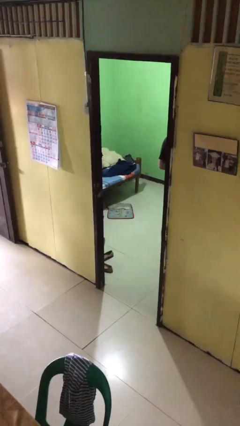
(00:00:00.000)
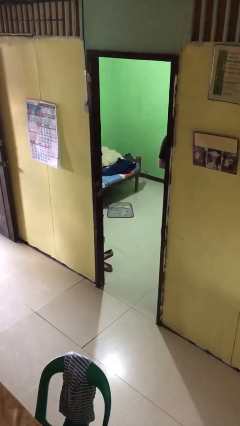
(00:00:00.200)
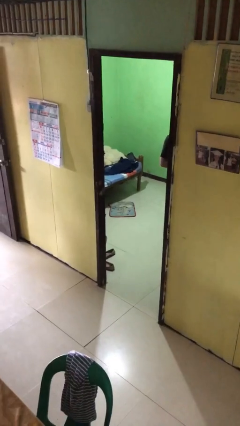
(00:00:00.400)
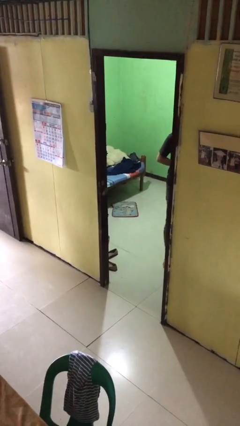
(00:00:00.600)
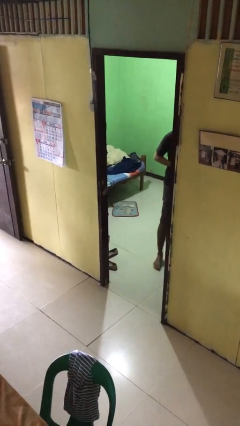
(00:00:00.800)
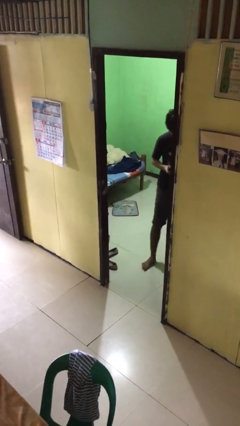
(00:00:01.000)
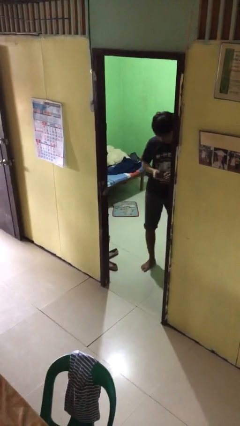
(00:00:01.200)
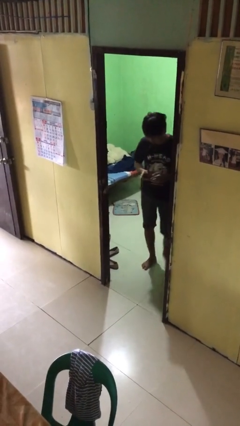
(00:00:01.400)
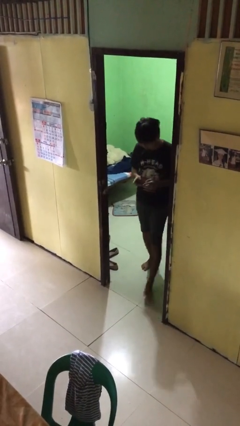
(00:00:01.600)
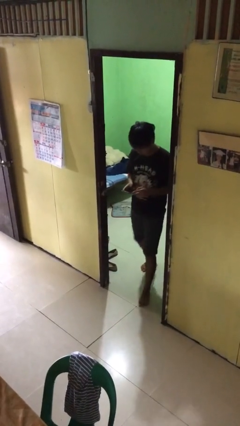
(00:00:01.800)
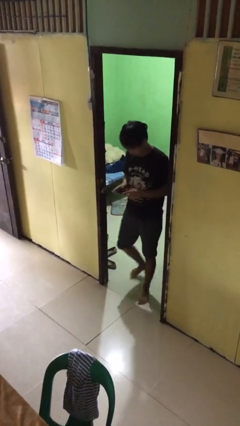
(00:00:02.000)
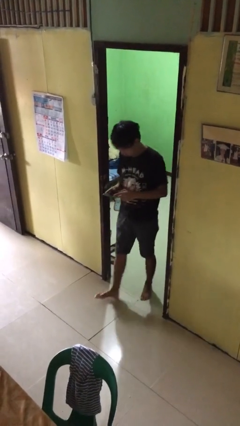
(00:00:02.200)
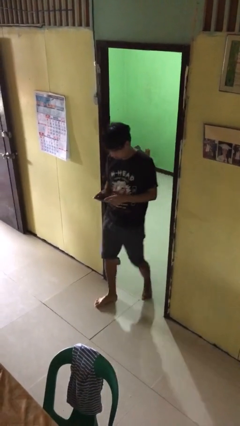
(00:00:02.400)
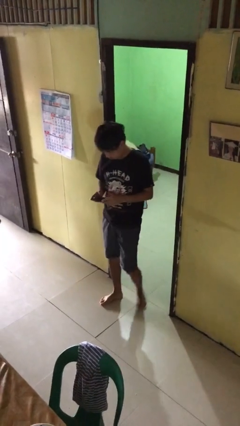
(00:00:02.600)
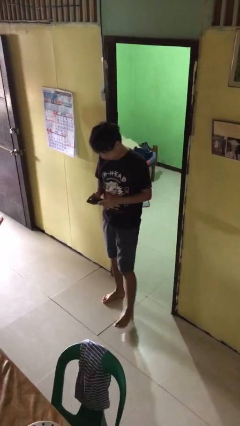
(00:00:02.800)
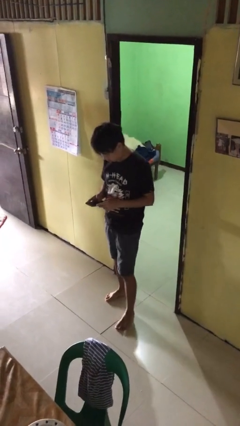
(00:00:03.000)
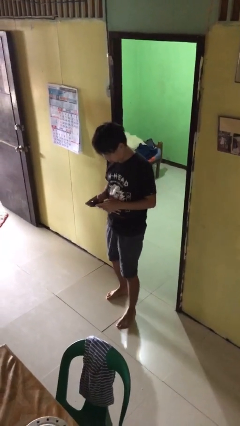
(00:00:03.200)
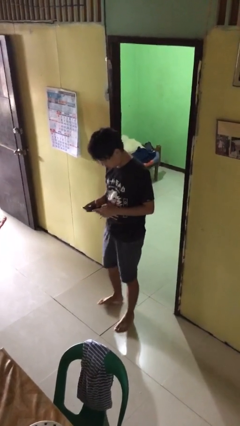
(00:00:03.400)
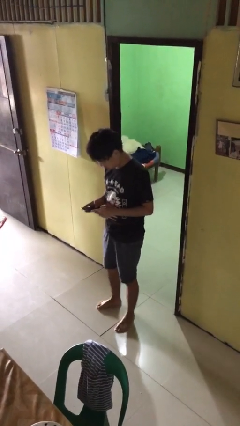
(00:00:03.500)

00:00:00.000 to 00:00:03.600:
person enters scene through structure

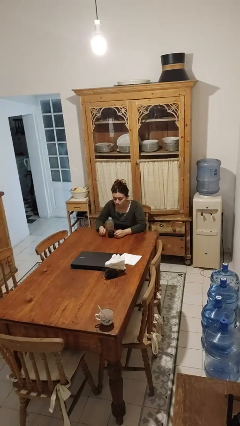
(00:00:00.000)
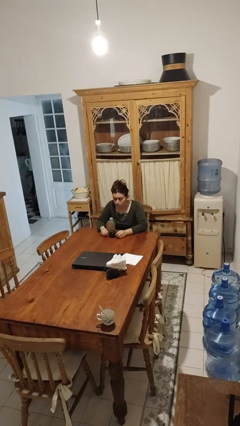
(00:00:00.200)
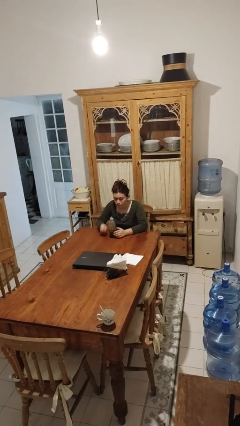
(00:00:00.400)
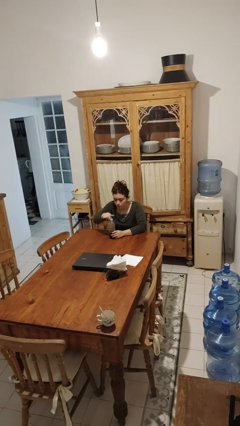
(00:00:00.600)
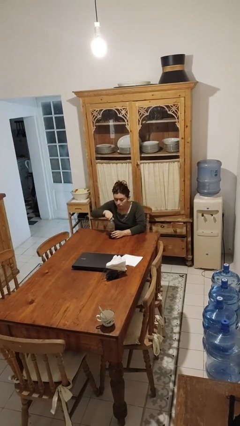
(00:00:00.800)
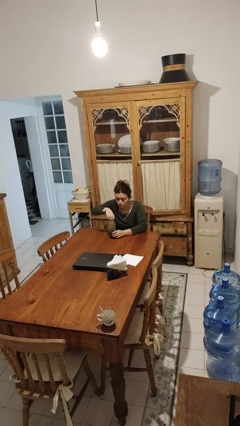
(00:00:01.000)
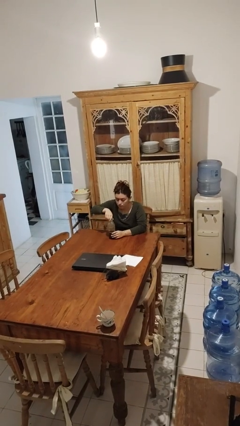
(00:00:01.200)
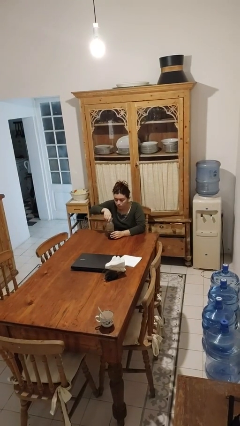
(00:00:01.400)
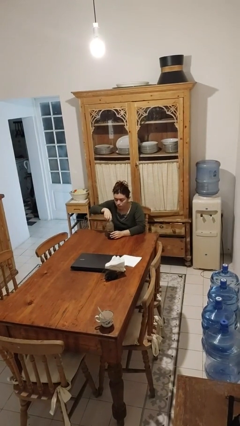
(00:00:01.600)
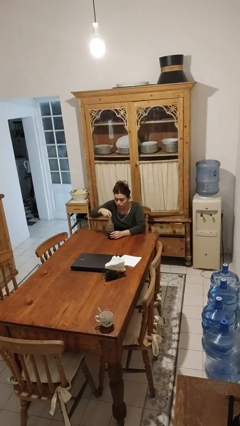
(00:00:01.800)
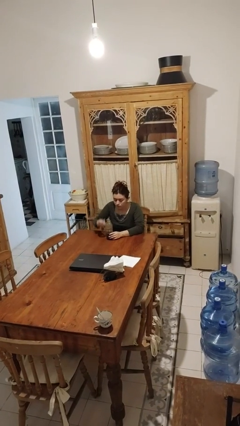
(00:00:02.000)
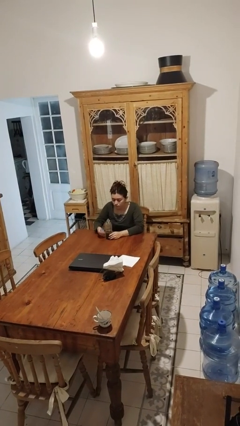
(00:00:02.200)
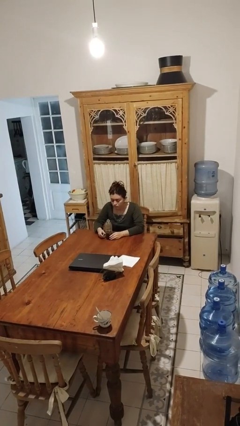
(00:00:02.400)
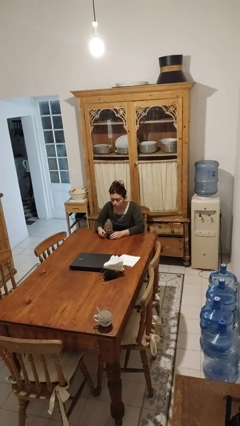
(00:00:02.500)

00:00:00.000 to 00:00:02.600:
person unscrews lid from bottle

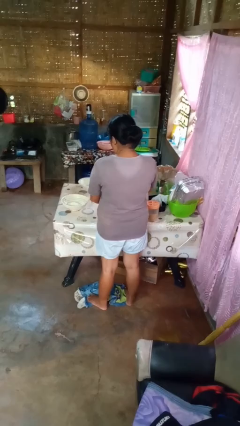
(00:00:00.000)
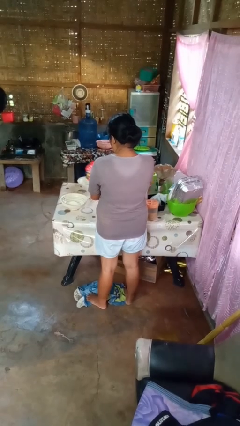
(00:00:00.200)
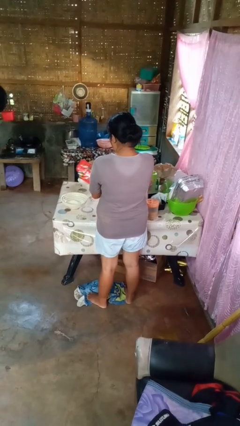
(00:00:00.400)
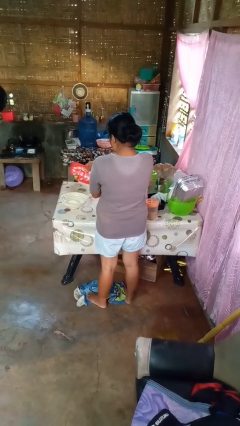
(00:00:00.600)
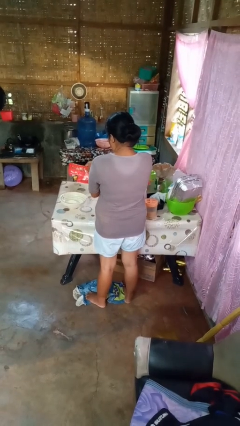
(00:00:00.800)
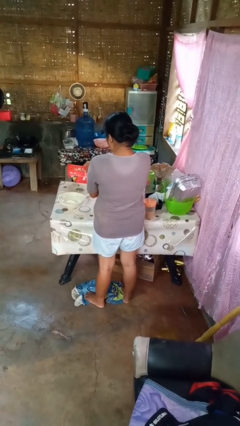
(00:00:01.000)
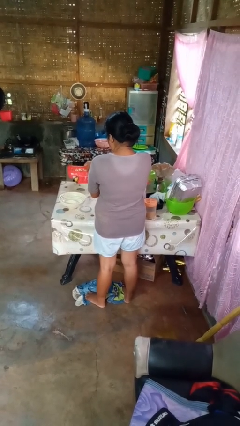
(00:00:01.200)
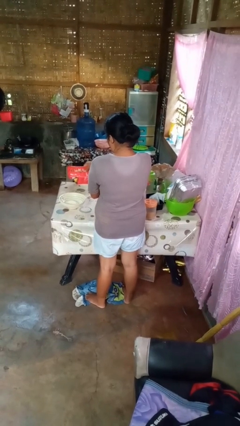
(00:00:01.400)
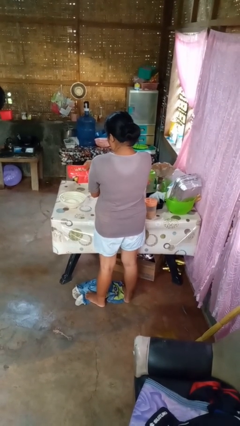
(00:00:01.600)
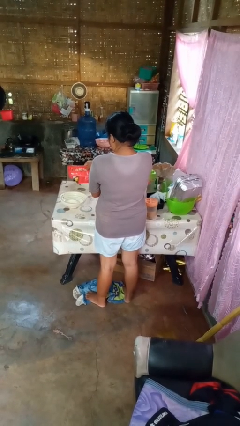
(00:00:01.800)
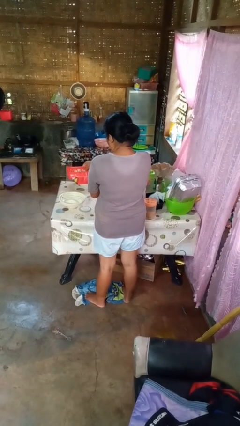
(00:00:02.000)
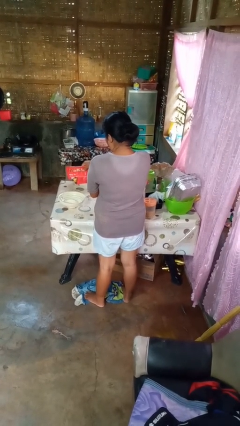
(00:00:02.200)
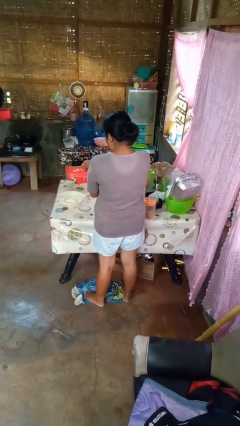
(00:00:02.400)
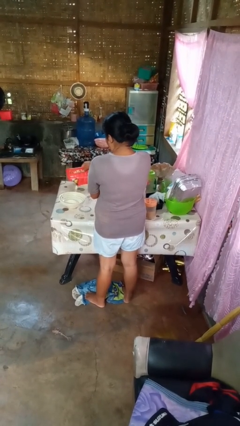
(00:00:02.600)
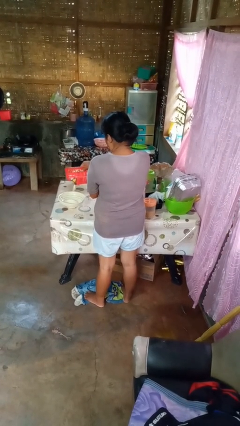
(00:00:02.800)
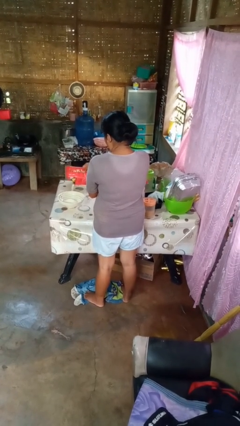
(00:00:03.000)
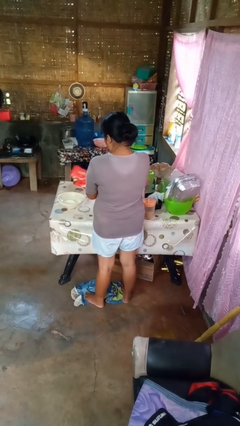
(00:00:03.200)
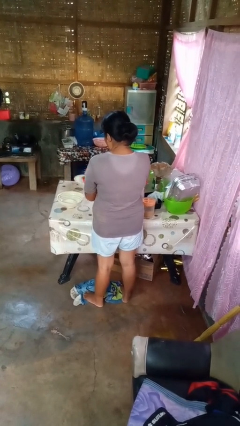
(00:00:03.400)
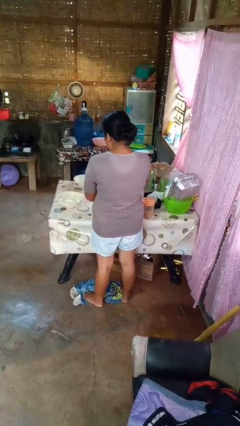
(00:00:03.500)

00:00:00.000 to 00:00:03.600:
person pours into bowl

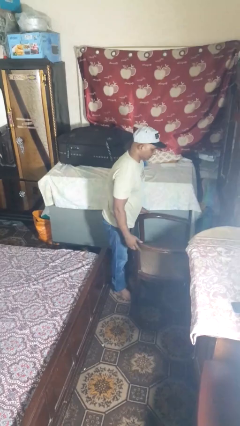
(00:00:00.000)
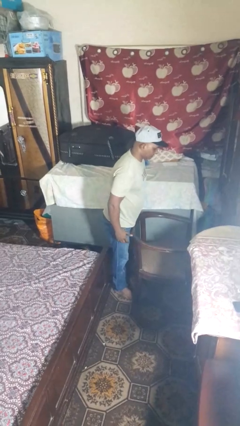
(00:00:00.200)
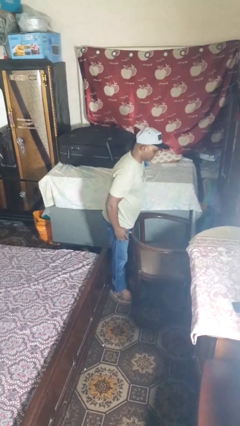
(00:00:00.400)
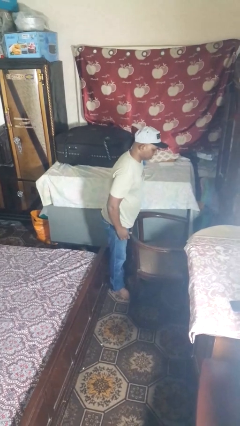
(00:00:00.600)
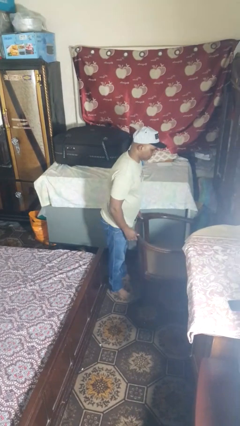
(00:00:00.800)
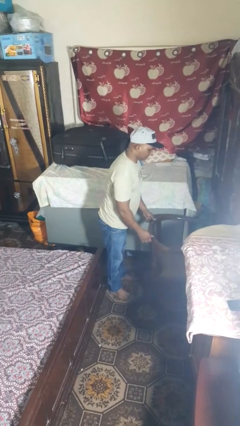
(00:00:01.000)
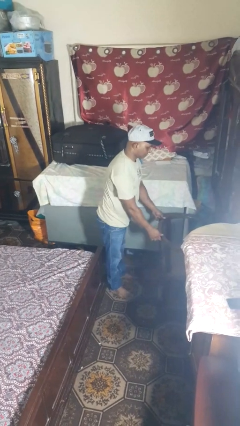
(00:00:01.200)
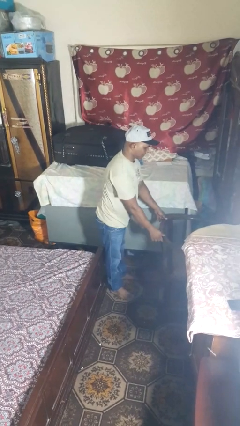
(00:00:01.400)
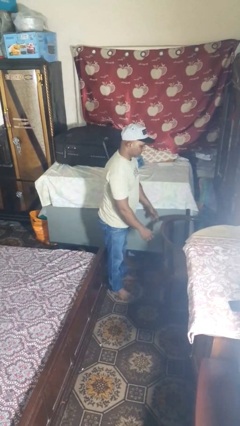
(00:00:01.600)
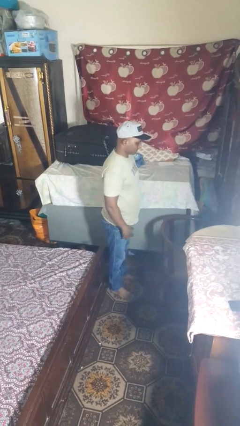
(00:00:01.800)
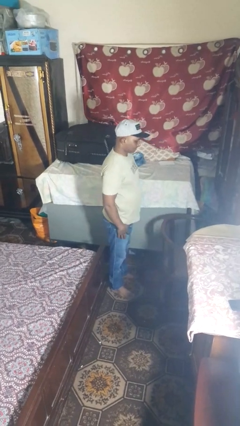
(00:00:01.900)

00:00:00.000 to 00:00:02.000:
person pushes in chair

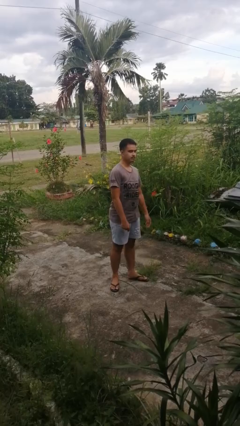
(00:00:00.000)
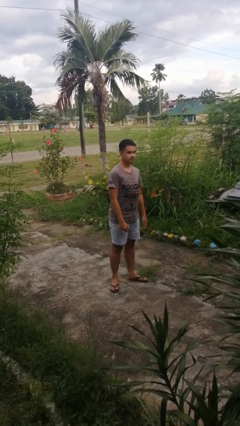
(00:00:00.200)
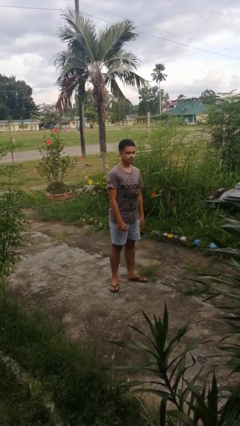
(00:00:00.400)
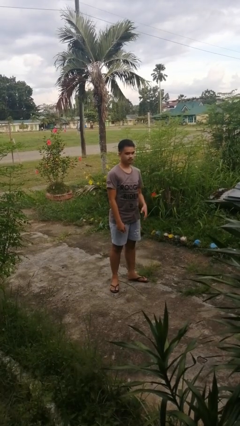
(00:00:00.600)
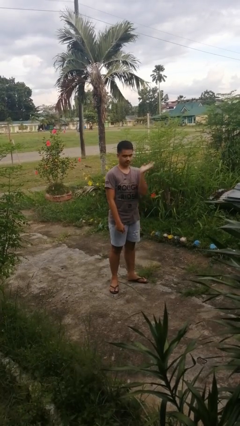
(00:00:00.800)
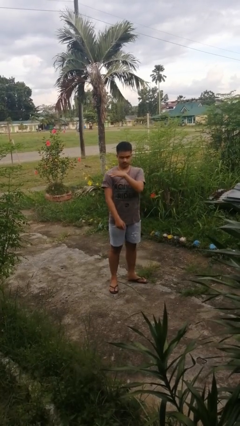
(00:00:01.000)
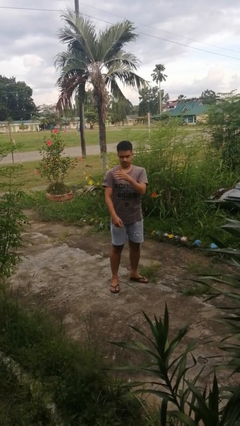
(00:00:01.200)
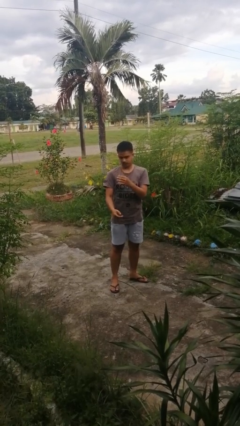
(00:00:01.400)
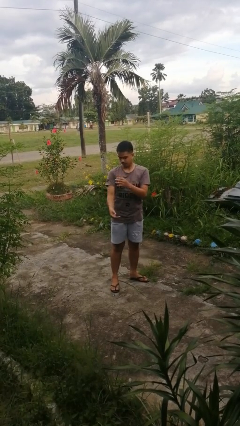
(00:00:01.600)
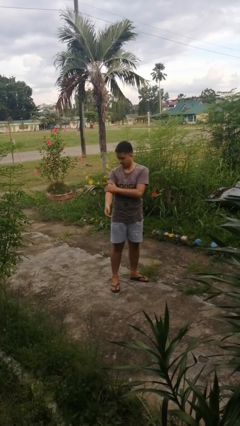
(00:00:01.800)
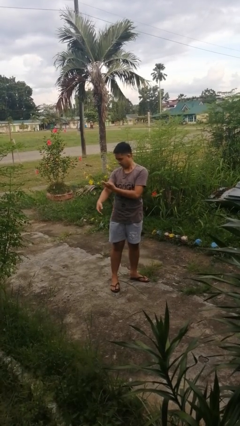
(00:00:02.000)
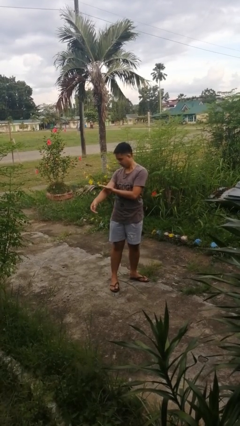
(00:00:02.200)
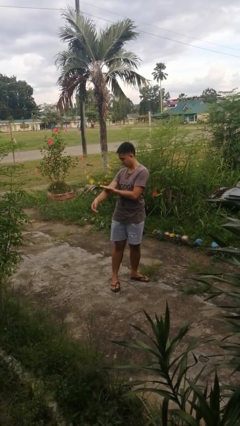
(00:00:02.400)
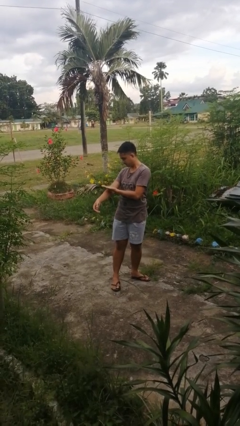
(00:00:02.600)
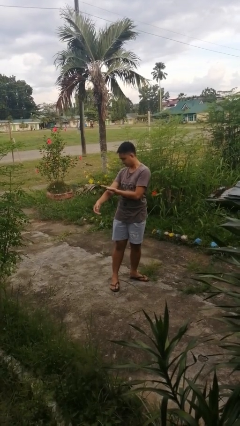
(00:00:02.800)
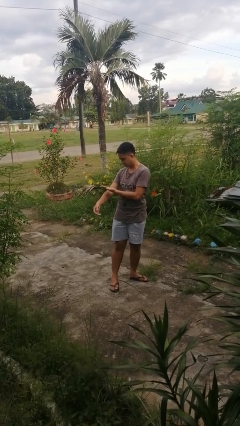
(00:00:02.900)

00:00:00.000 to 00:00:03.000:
person swats bug

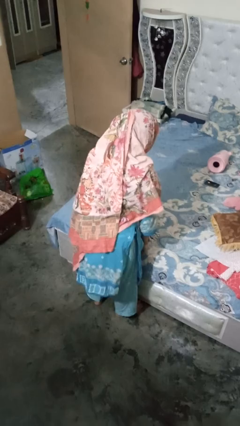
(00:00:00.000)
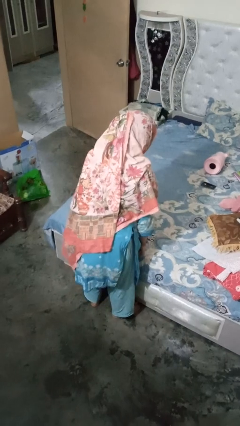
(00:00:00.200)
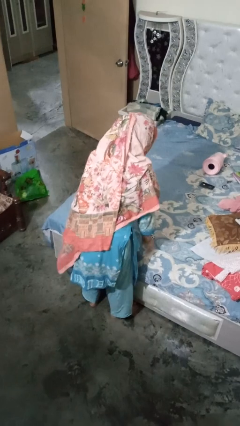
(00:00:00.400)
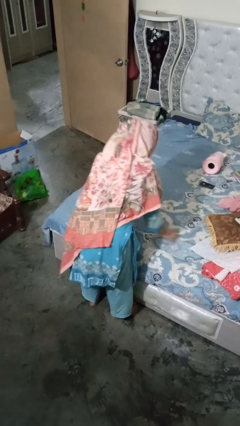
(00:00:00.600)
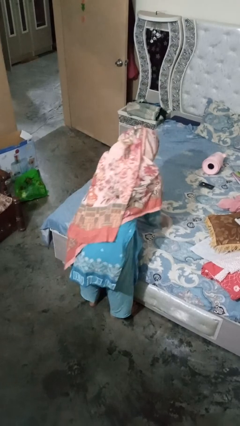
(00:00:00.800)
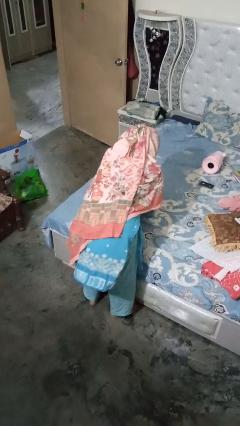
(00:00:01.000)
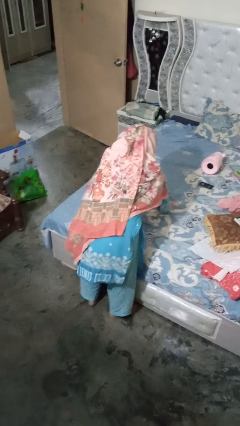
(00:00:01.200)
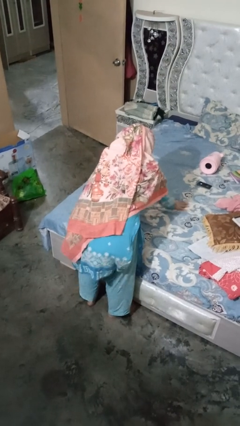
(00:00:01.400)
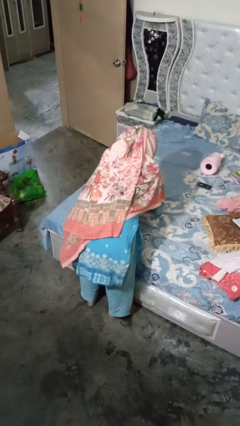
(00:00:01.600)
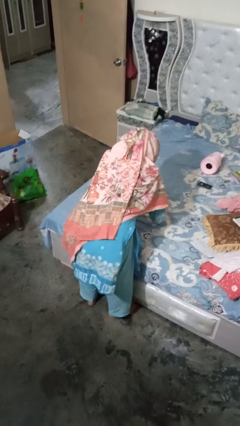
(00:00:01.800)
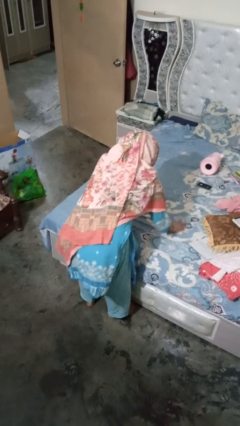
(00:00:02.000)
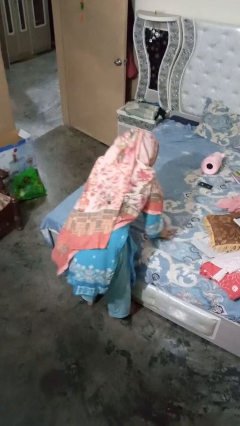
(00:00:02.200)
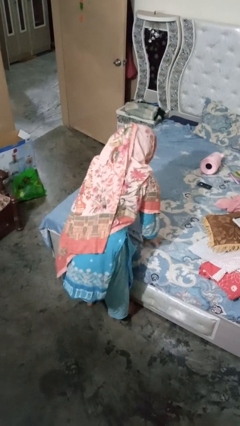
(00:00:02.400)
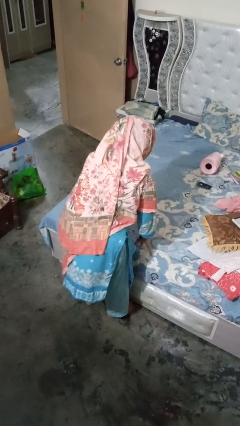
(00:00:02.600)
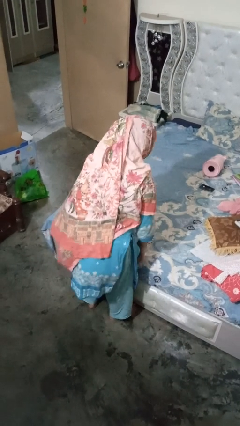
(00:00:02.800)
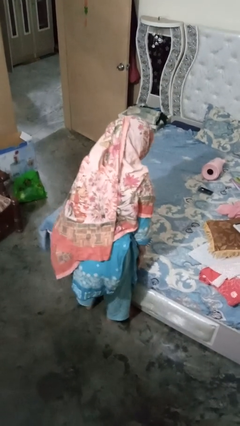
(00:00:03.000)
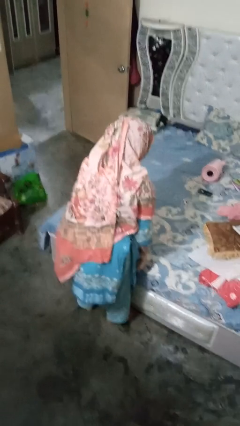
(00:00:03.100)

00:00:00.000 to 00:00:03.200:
person searches under bed
